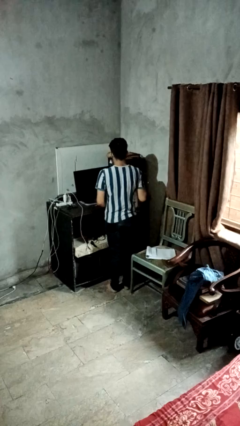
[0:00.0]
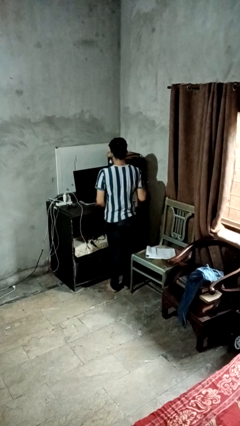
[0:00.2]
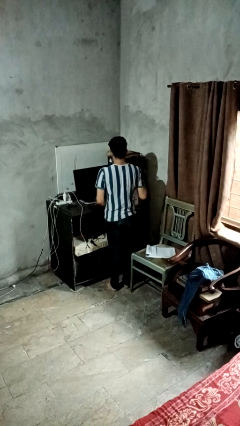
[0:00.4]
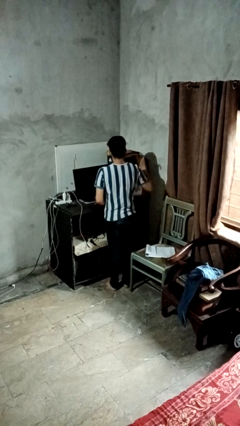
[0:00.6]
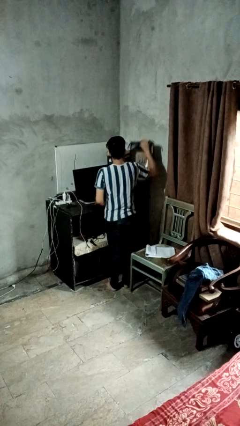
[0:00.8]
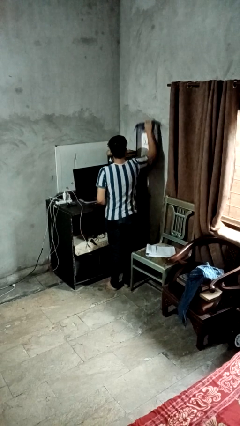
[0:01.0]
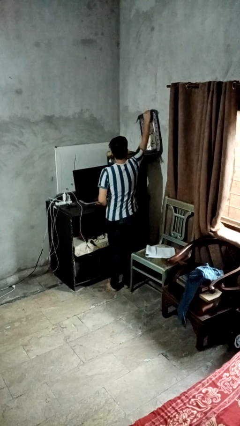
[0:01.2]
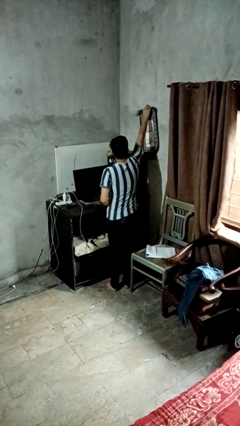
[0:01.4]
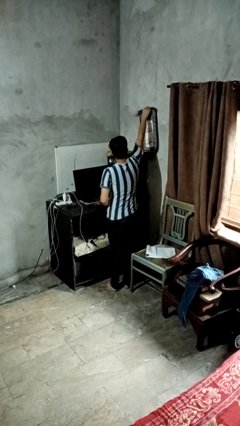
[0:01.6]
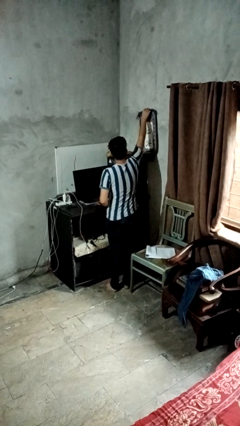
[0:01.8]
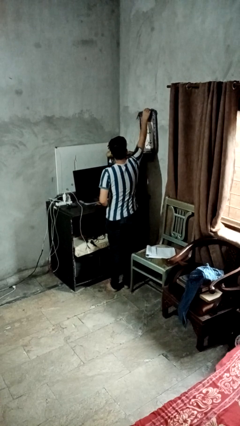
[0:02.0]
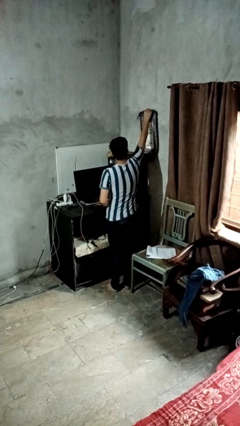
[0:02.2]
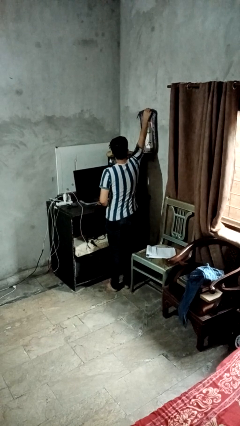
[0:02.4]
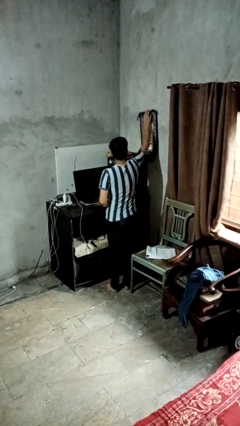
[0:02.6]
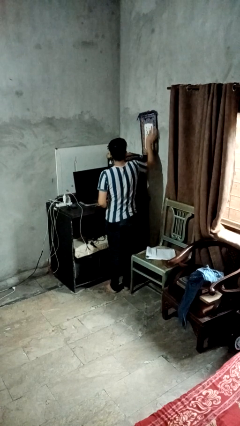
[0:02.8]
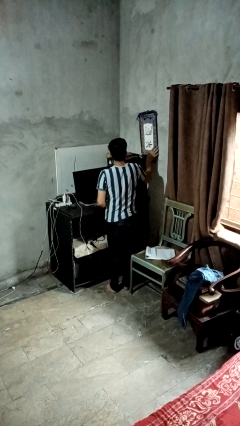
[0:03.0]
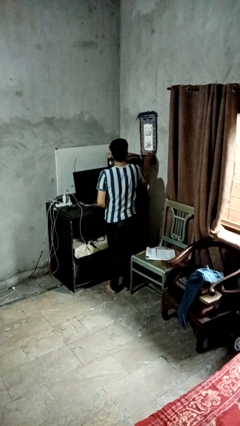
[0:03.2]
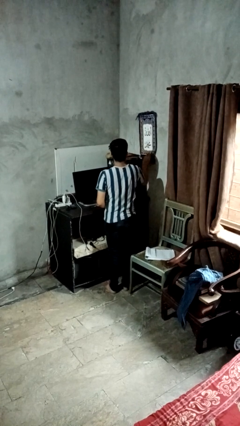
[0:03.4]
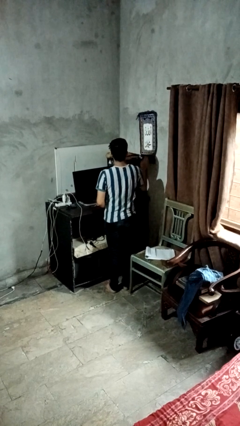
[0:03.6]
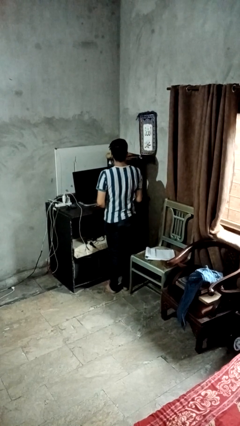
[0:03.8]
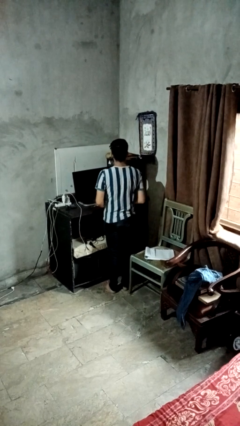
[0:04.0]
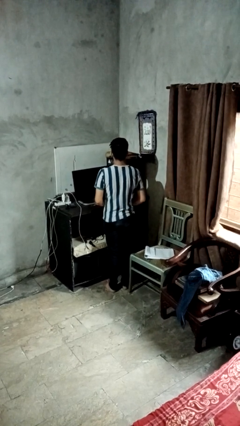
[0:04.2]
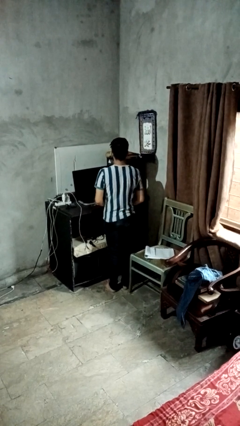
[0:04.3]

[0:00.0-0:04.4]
person puts up picture frame

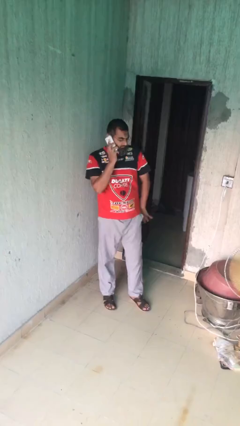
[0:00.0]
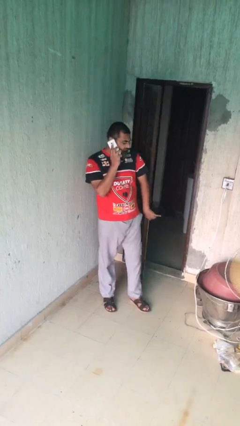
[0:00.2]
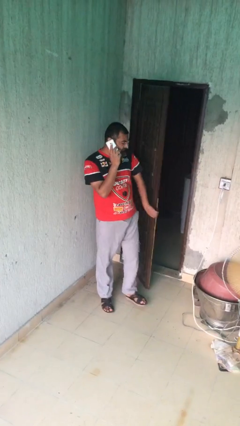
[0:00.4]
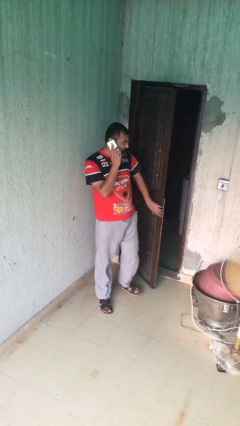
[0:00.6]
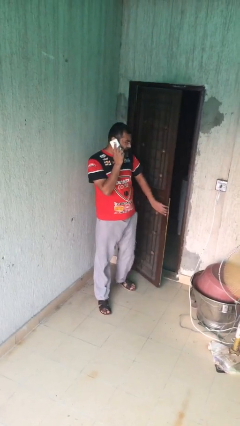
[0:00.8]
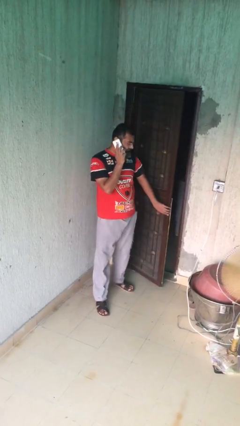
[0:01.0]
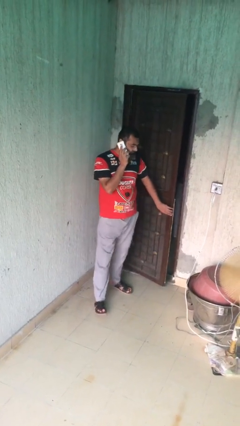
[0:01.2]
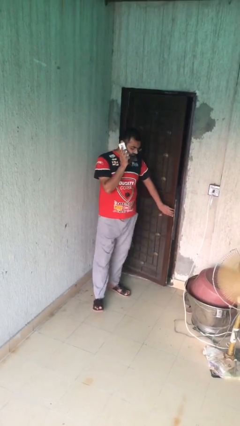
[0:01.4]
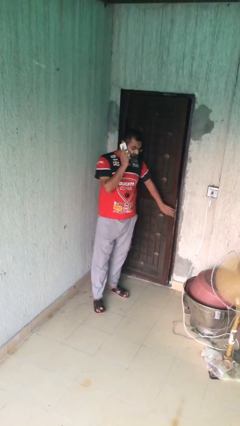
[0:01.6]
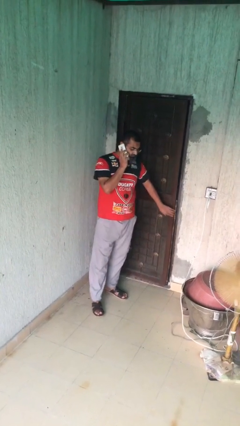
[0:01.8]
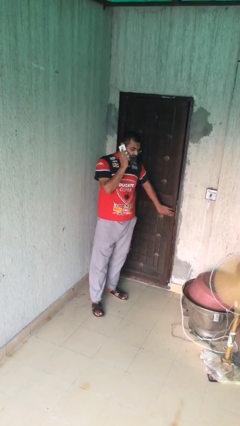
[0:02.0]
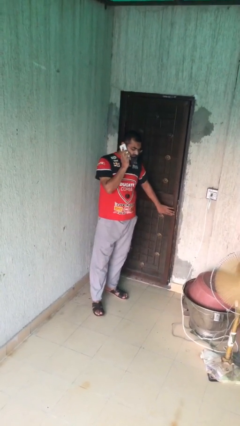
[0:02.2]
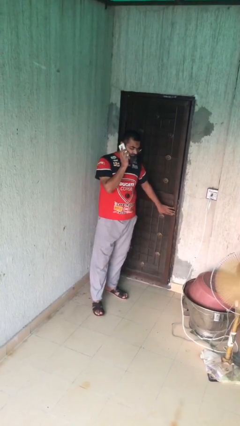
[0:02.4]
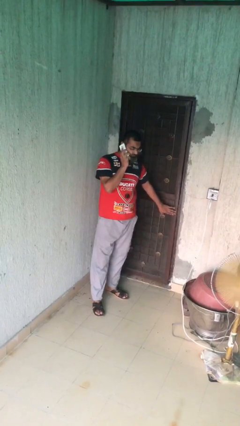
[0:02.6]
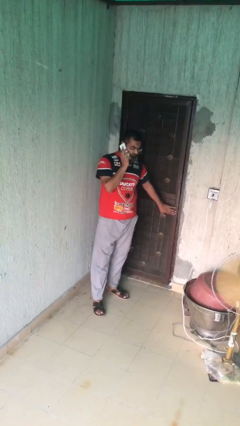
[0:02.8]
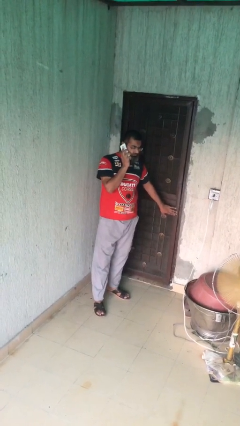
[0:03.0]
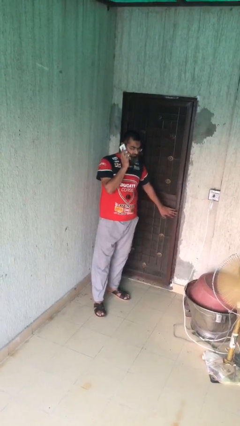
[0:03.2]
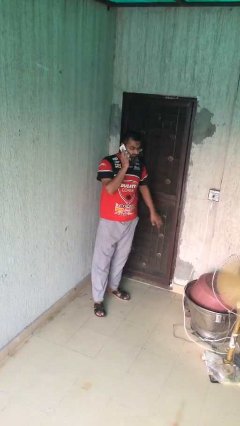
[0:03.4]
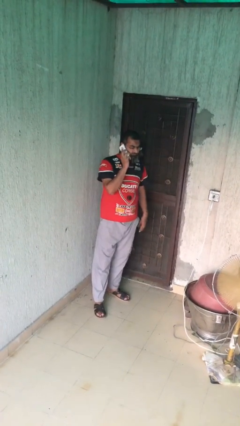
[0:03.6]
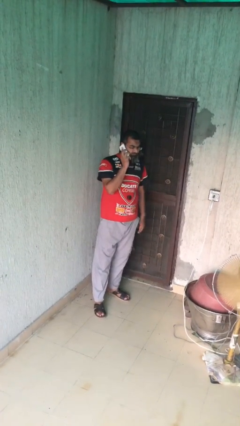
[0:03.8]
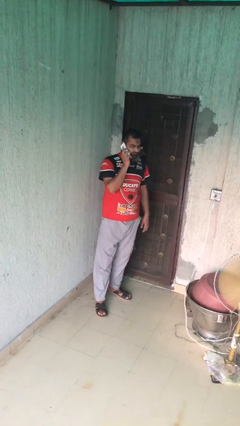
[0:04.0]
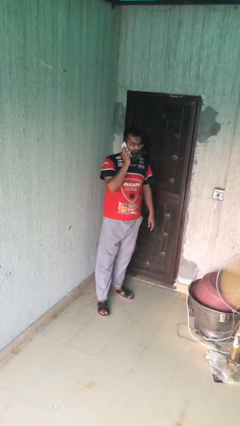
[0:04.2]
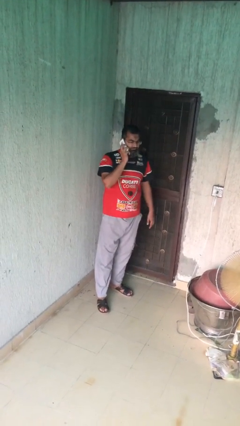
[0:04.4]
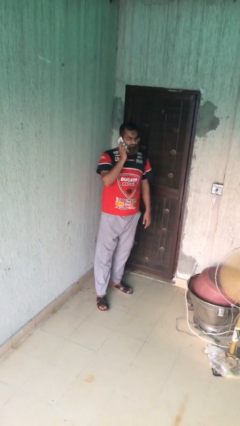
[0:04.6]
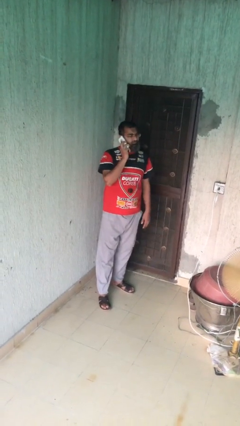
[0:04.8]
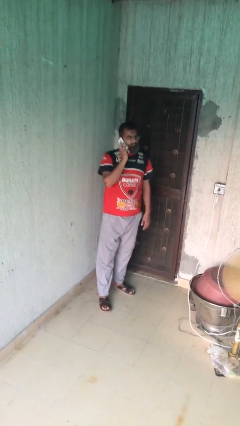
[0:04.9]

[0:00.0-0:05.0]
person closes facility door

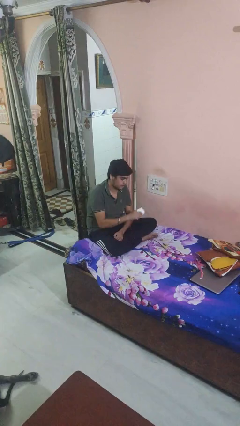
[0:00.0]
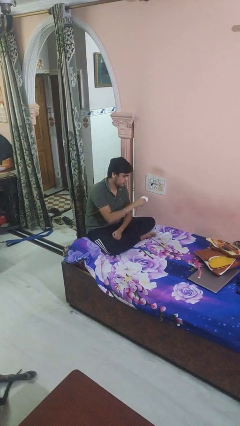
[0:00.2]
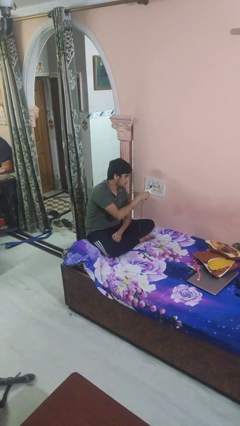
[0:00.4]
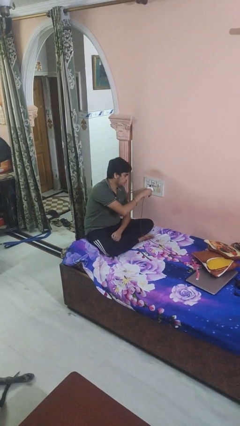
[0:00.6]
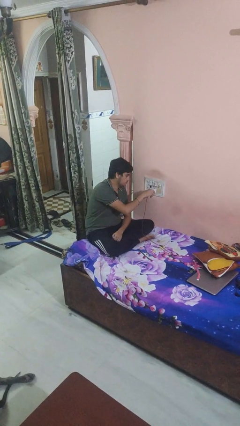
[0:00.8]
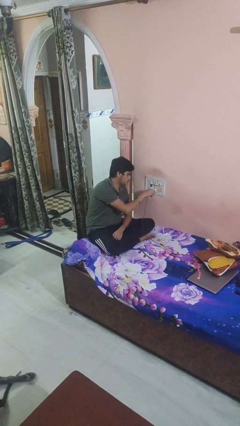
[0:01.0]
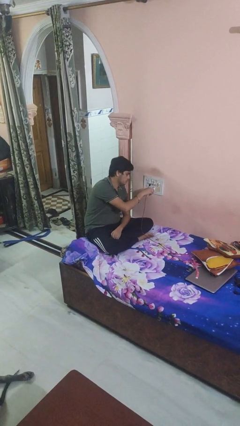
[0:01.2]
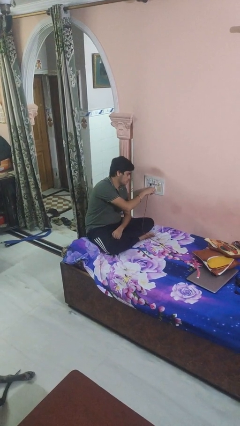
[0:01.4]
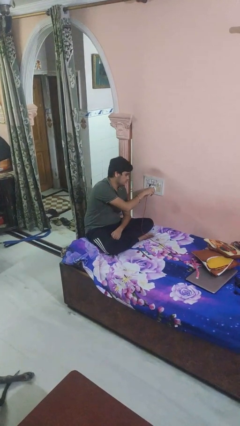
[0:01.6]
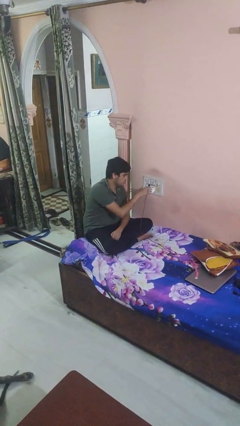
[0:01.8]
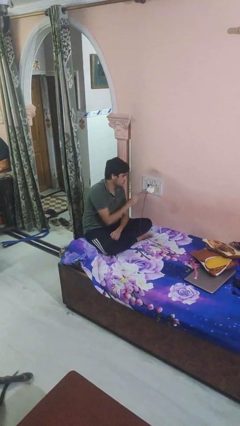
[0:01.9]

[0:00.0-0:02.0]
person plugs into electrical socket

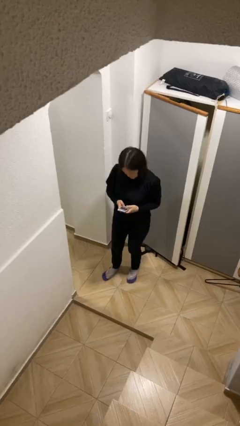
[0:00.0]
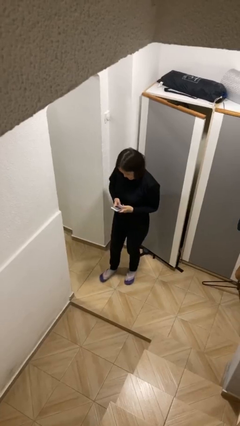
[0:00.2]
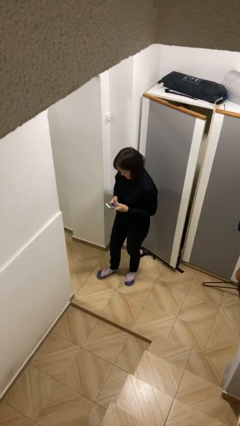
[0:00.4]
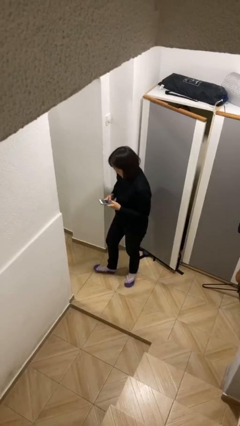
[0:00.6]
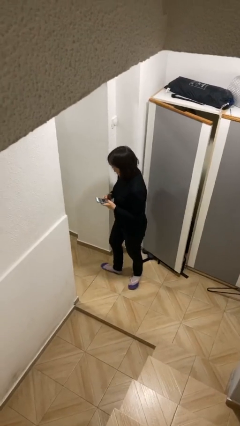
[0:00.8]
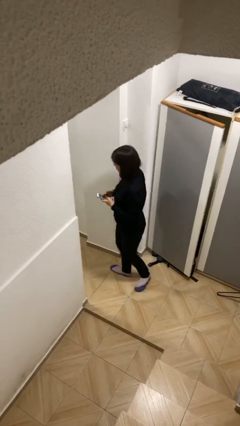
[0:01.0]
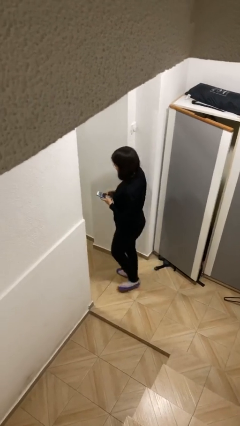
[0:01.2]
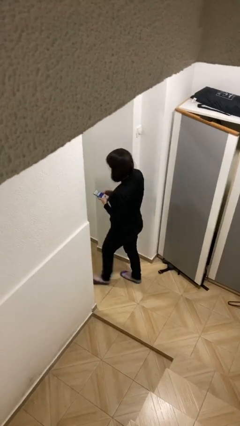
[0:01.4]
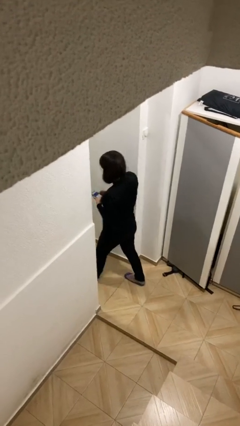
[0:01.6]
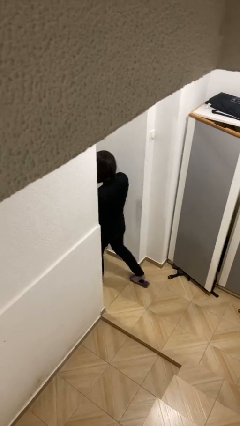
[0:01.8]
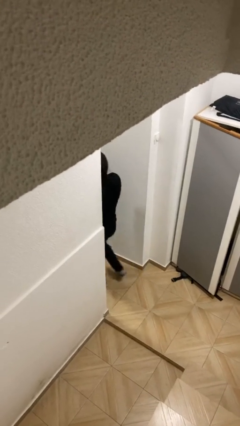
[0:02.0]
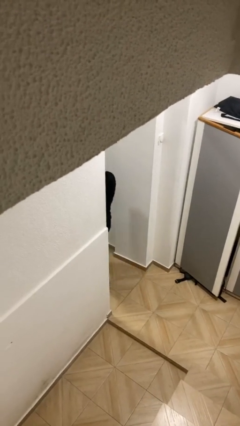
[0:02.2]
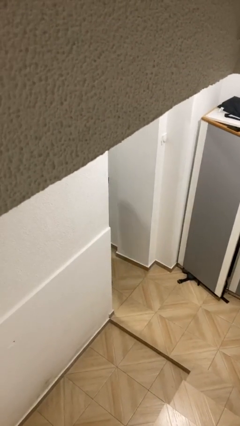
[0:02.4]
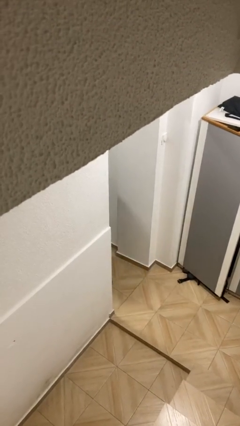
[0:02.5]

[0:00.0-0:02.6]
person exits scene through structure

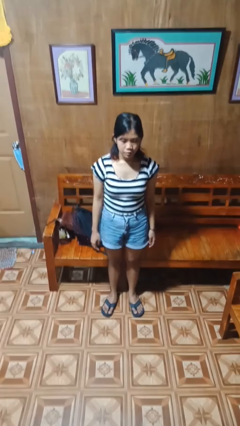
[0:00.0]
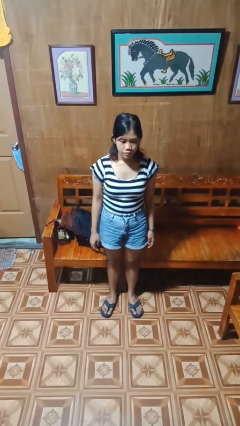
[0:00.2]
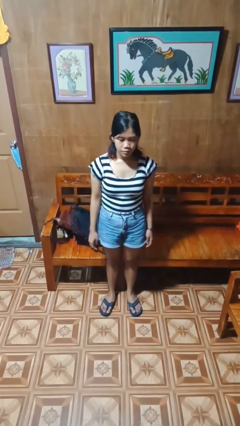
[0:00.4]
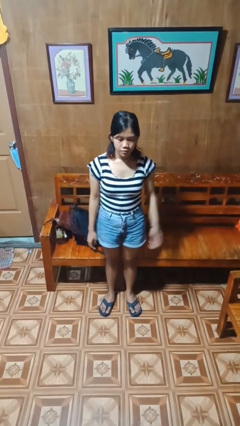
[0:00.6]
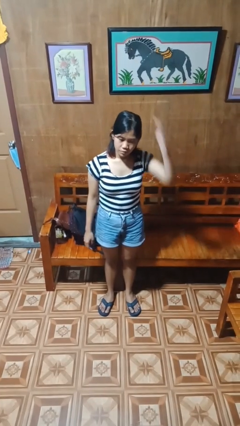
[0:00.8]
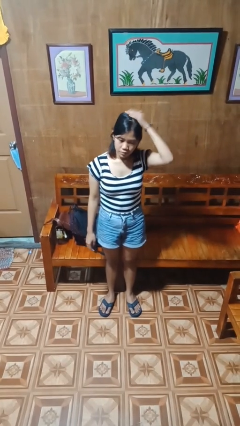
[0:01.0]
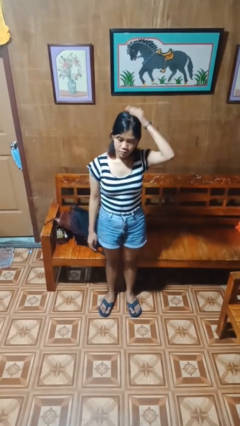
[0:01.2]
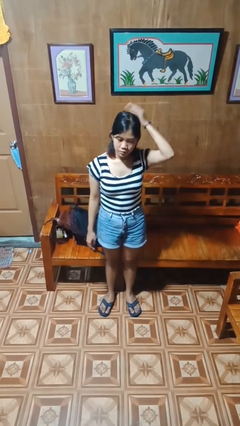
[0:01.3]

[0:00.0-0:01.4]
person pats head

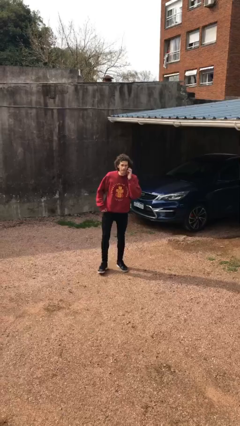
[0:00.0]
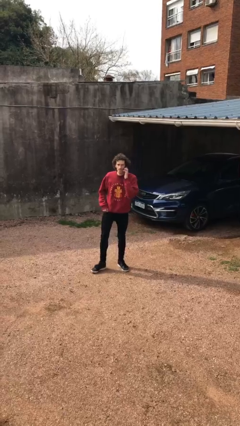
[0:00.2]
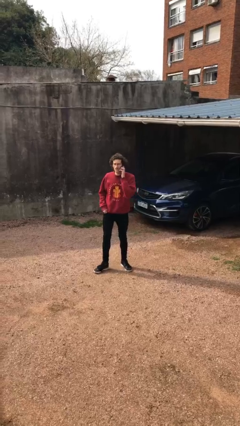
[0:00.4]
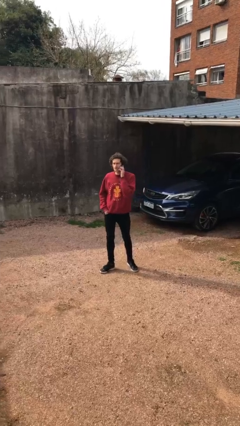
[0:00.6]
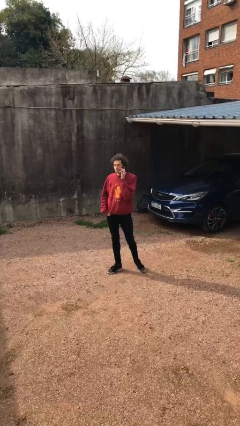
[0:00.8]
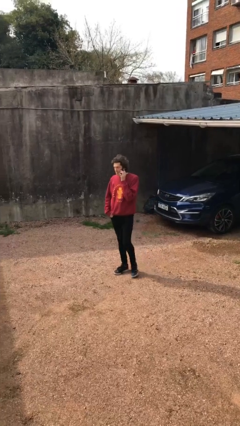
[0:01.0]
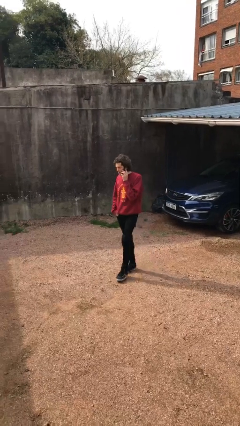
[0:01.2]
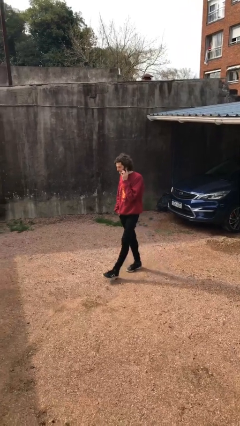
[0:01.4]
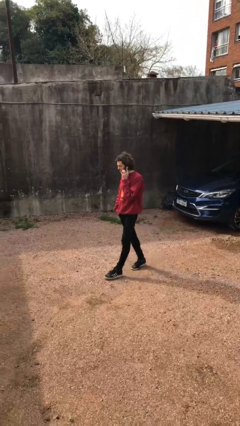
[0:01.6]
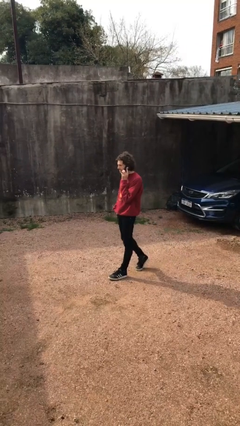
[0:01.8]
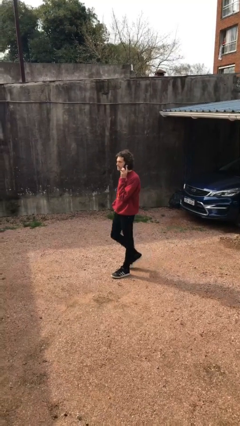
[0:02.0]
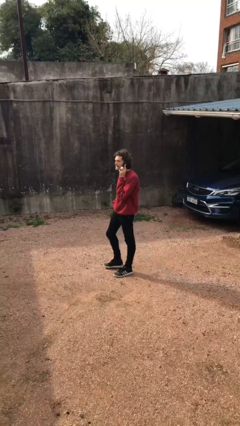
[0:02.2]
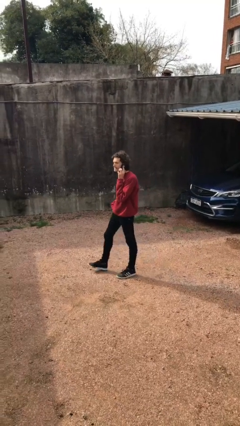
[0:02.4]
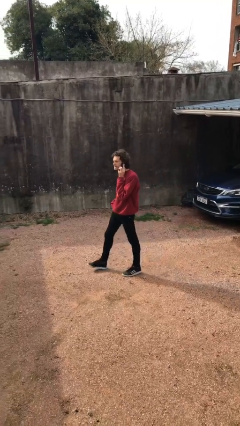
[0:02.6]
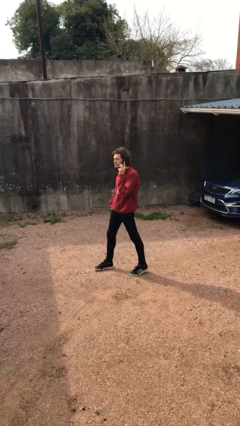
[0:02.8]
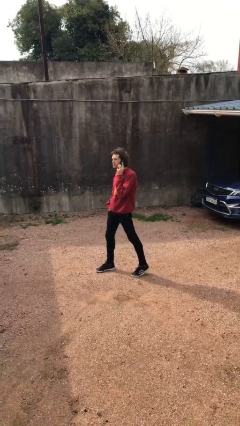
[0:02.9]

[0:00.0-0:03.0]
person talks on phone
